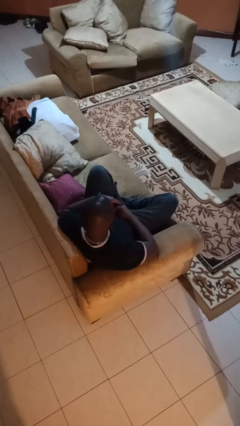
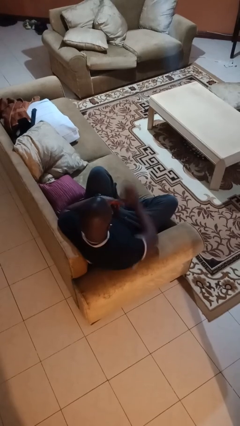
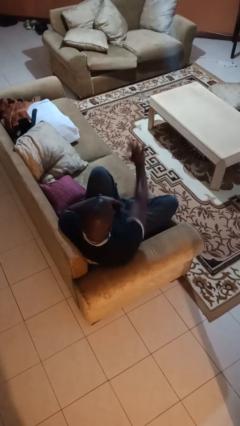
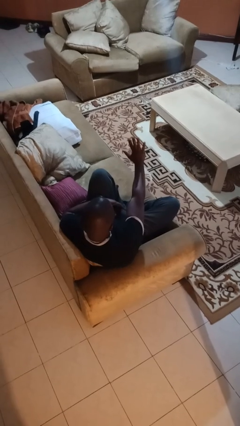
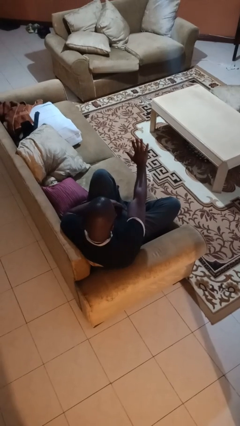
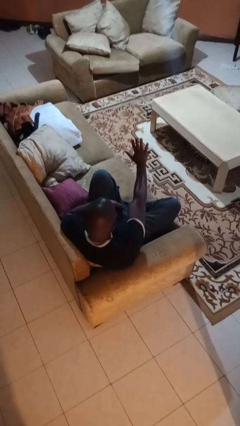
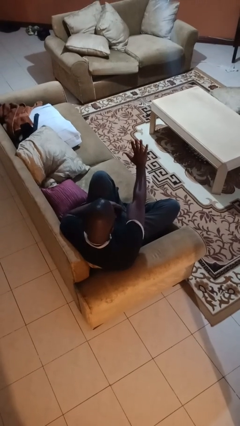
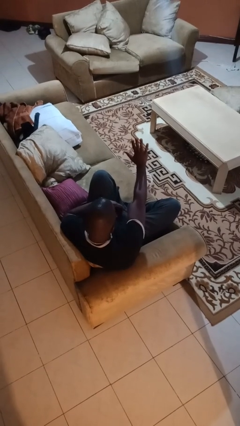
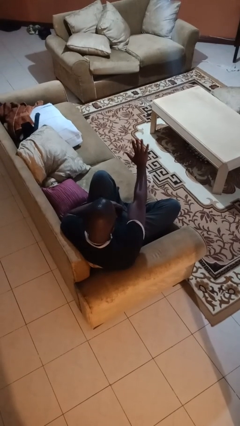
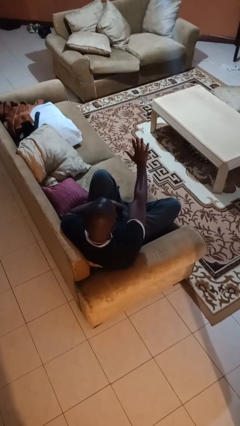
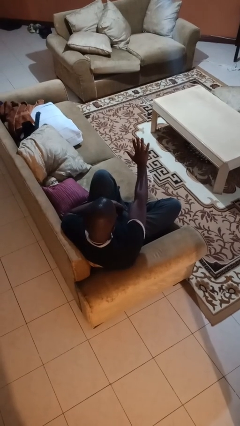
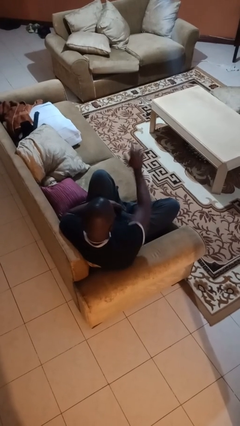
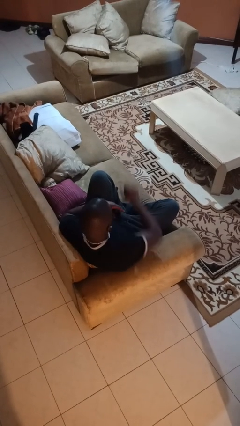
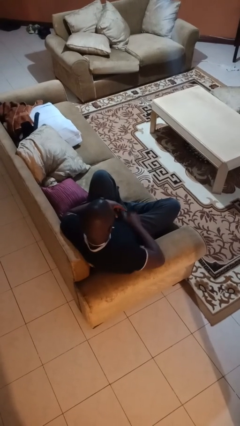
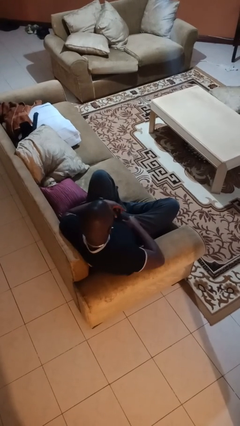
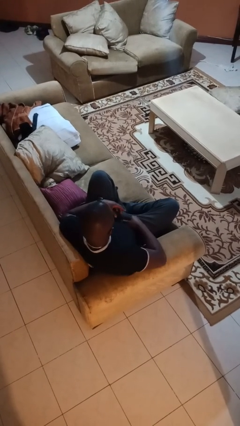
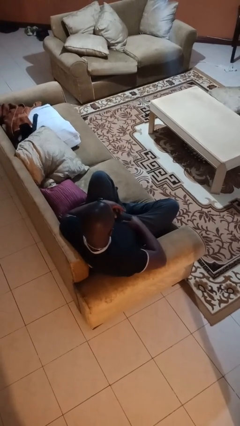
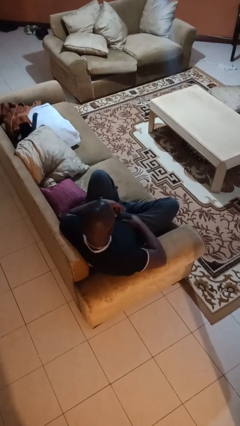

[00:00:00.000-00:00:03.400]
person gestures stop

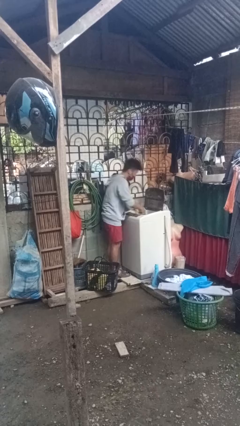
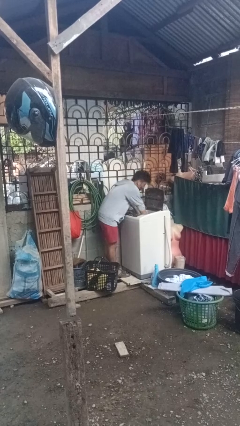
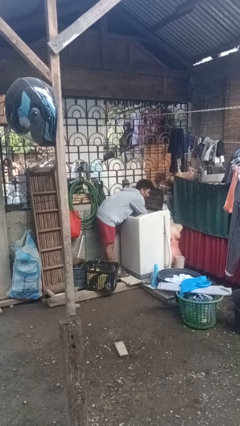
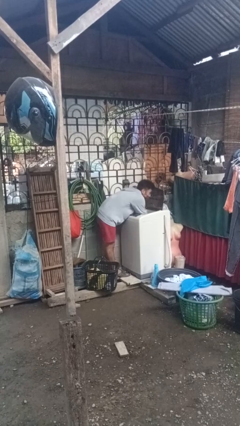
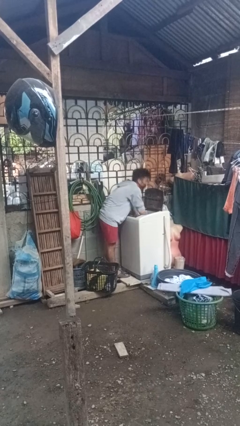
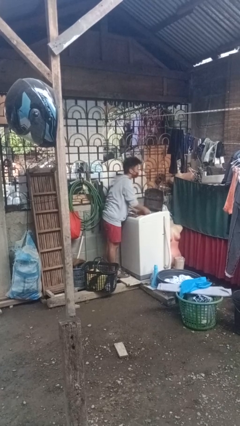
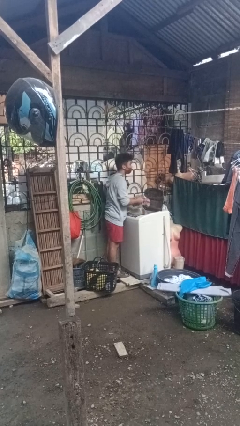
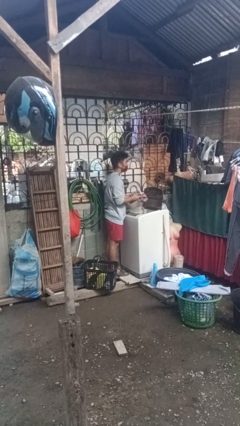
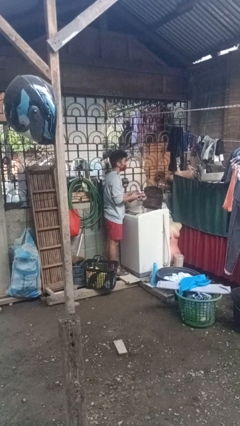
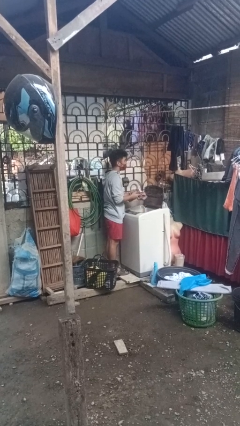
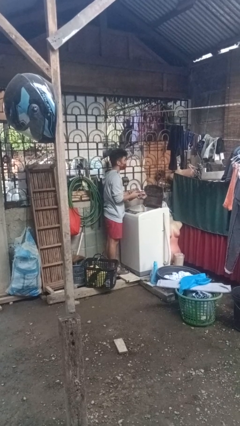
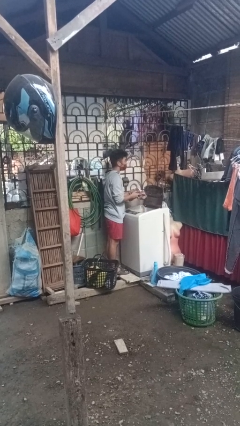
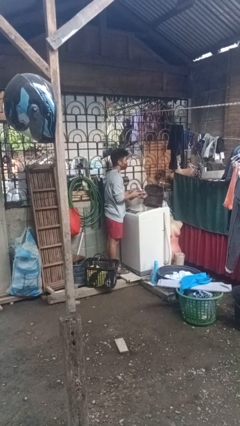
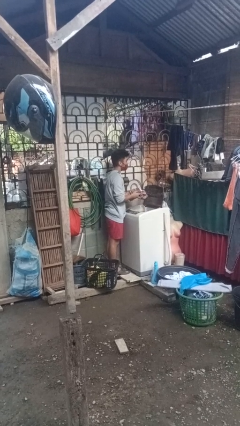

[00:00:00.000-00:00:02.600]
person unloads clotheswasher

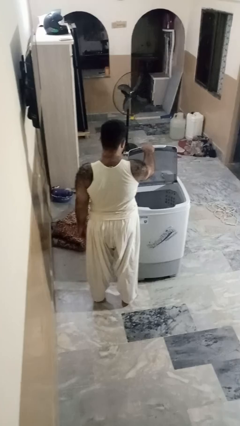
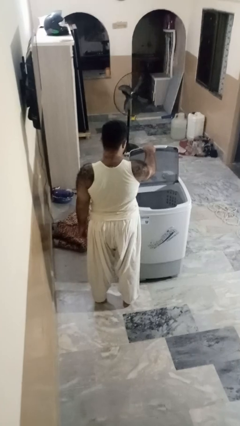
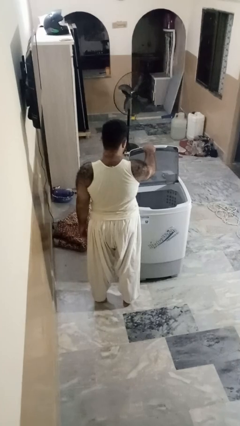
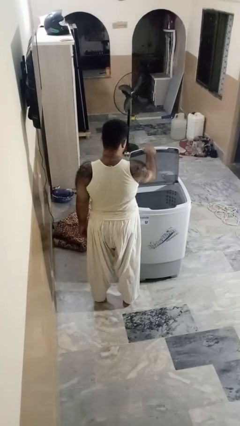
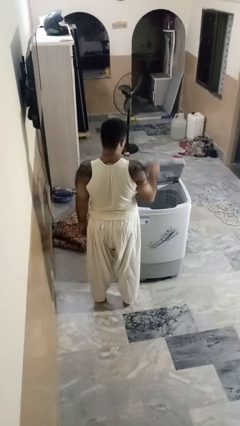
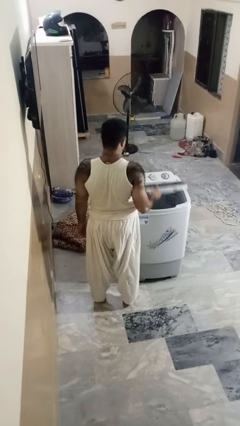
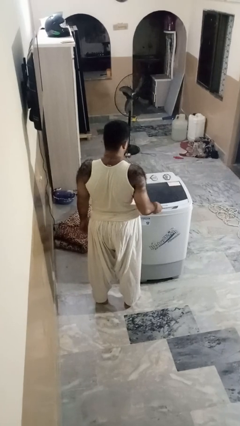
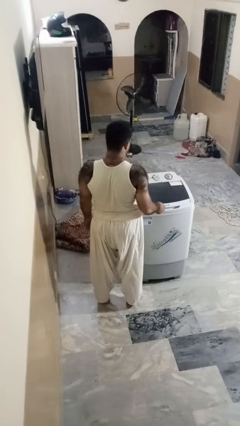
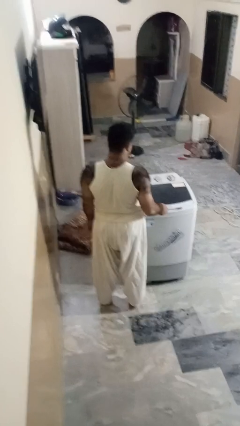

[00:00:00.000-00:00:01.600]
person closes clothes washer

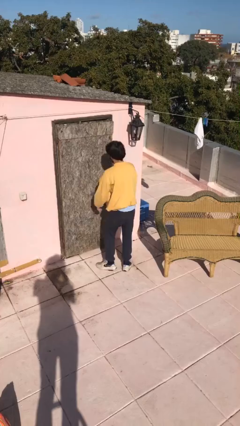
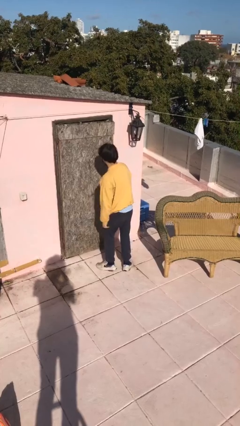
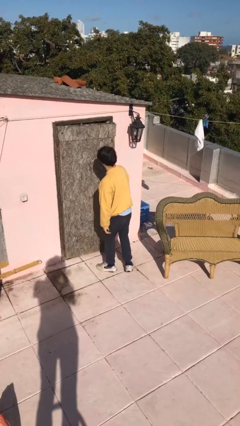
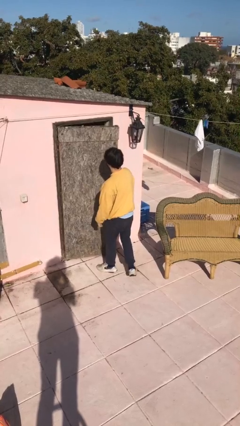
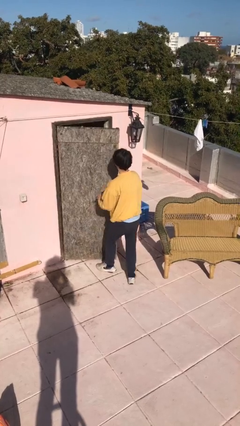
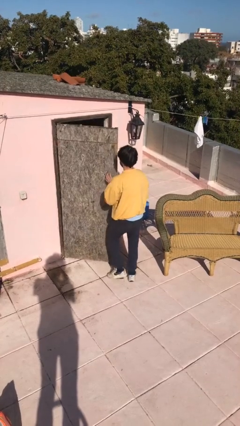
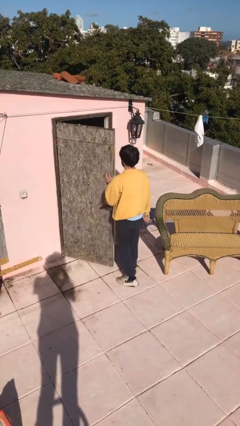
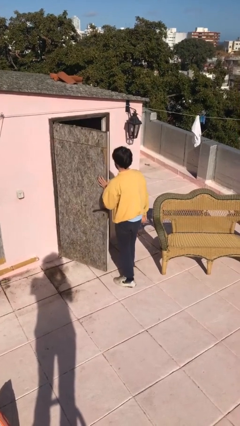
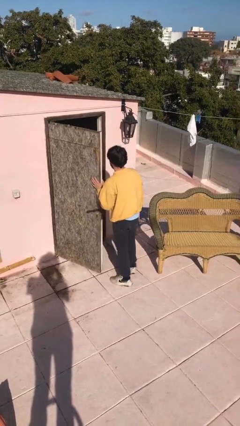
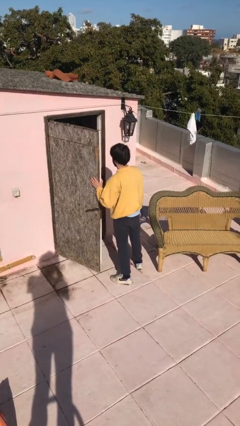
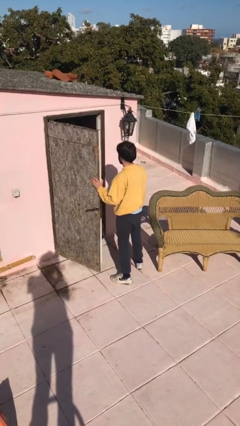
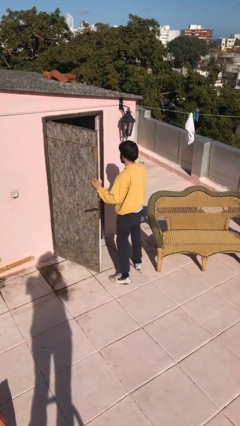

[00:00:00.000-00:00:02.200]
person opens facility door

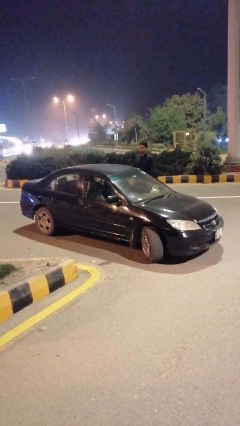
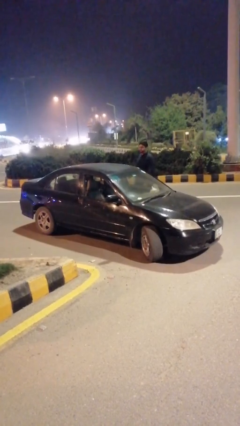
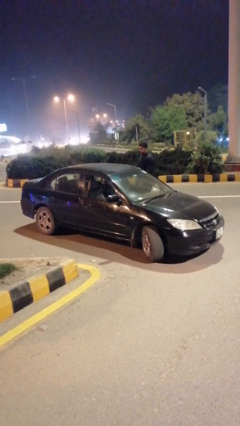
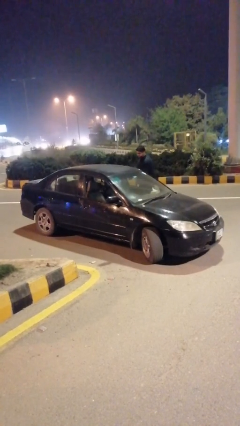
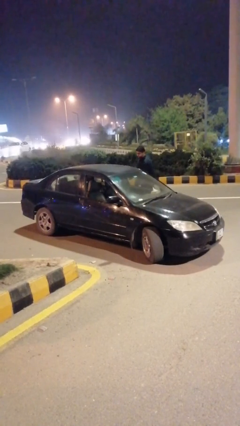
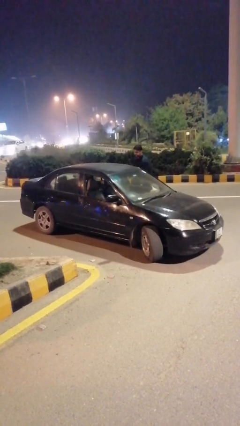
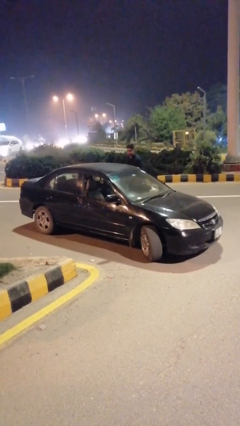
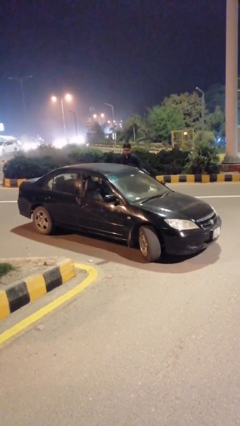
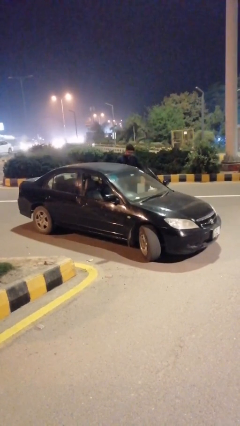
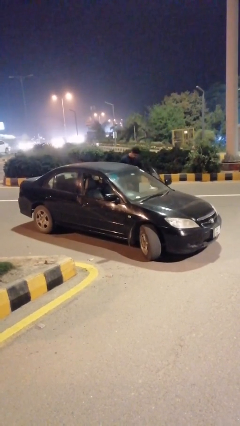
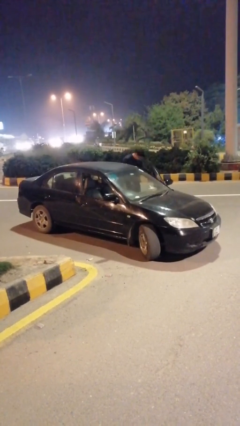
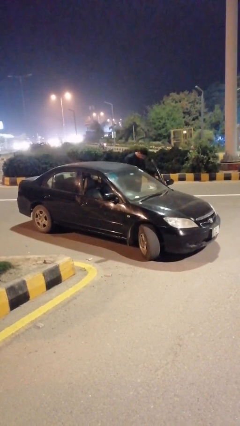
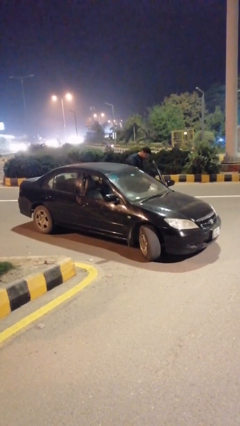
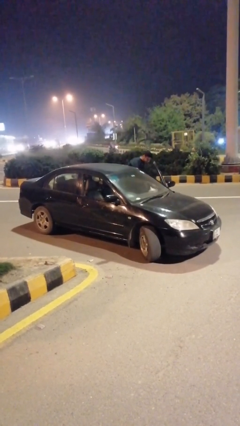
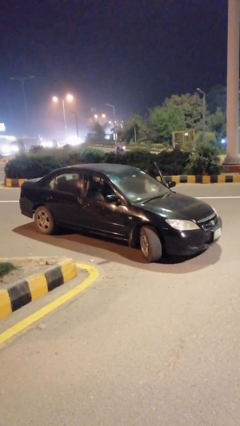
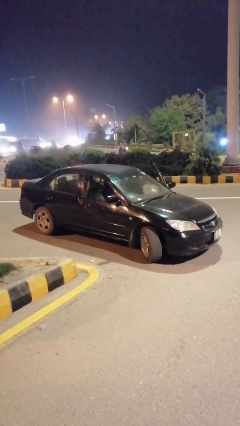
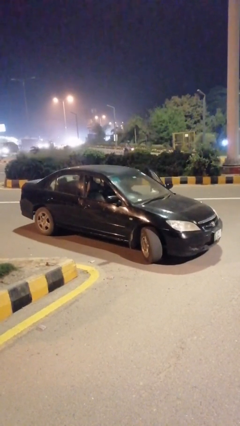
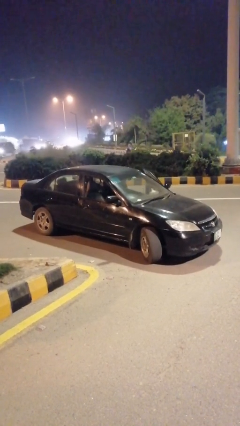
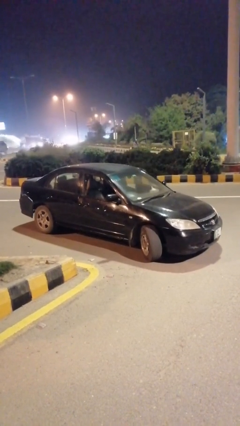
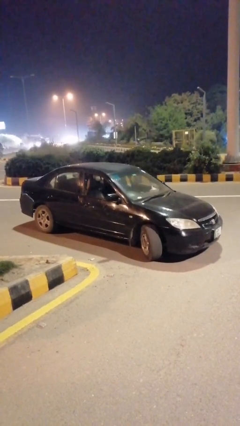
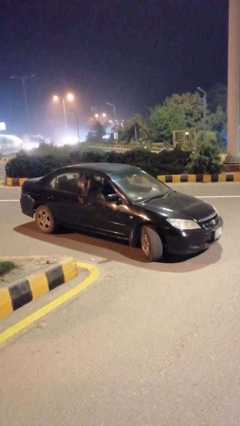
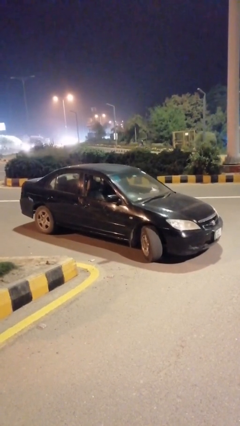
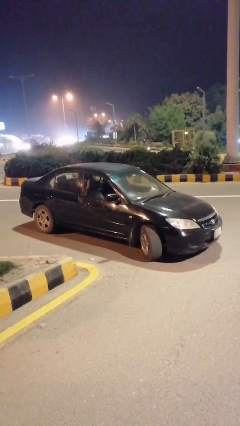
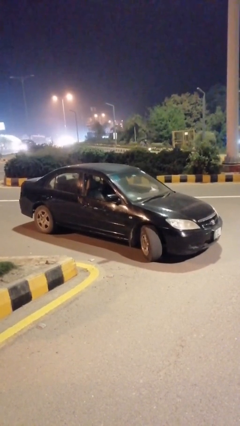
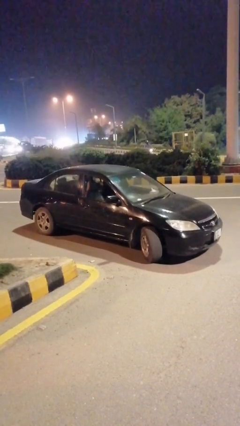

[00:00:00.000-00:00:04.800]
car picks up person

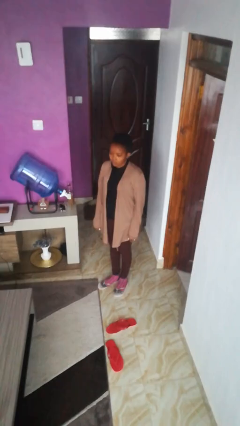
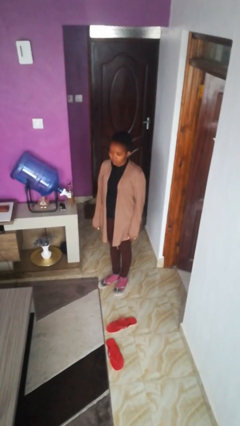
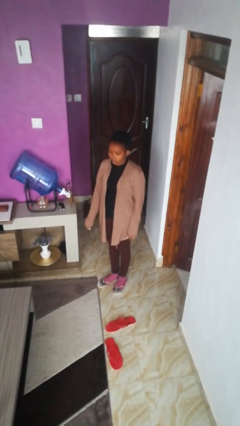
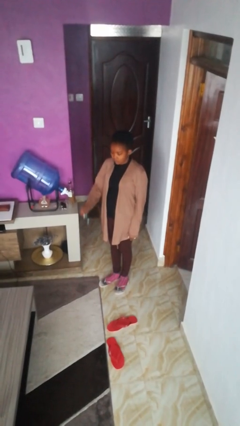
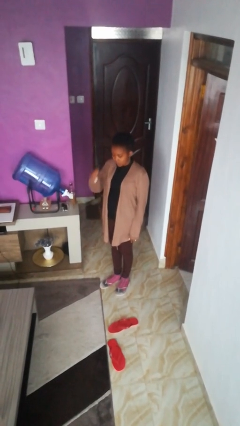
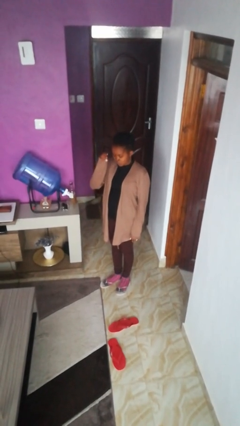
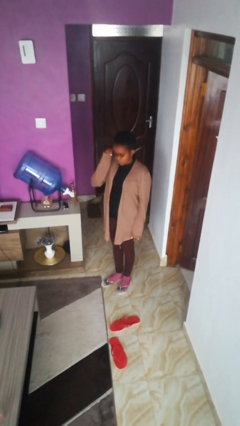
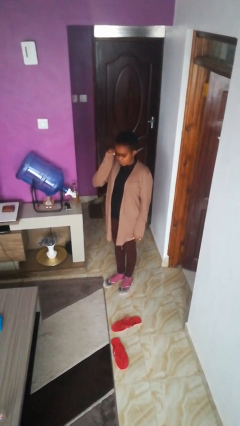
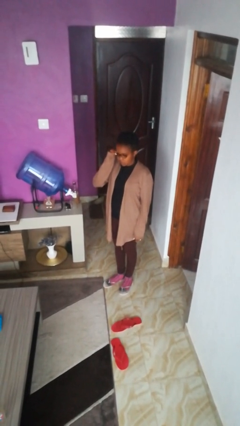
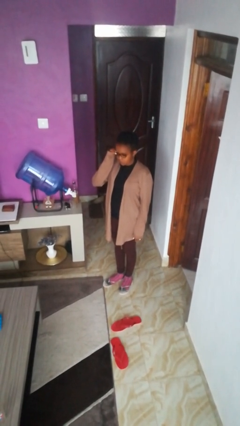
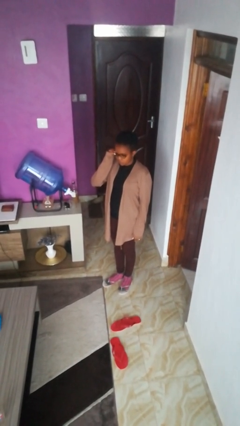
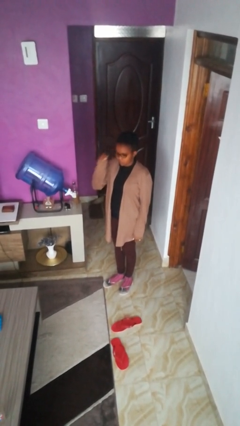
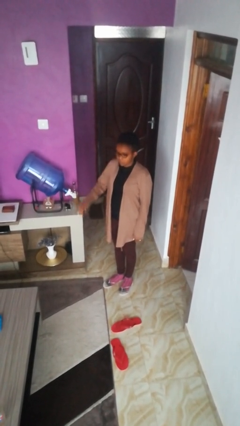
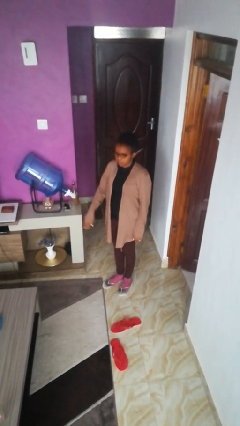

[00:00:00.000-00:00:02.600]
person puts on glasses

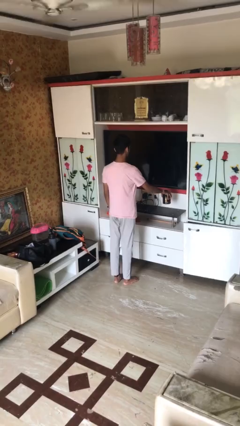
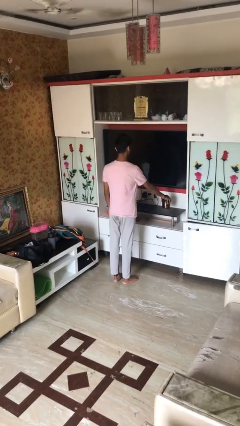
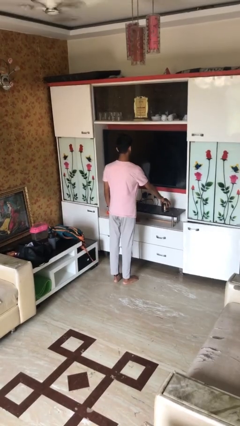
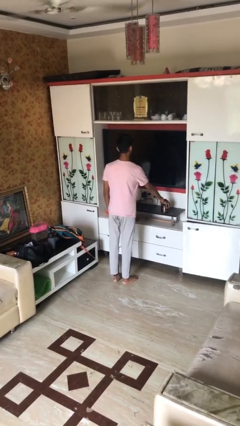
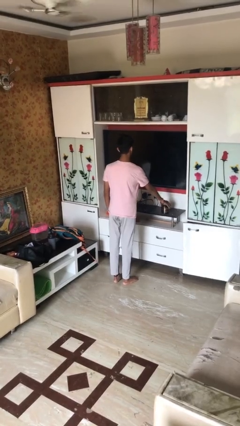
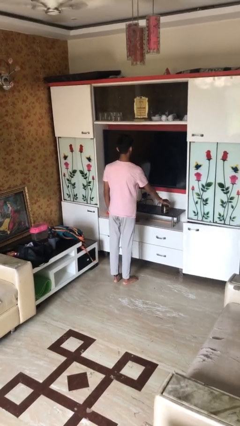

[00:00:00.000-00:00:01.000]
person puts down object on countertop
